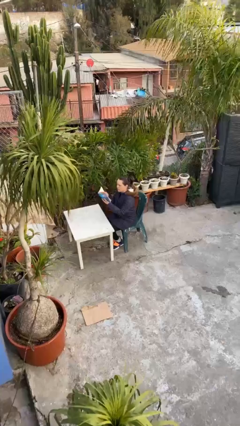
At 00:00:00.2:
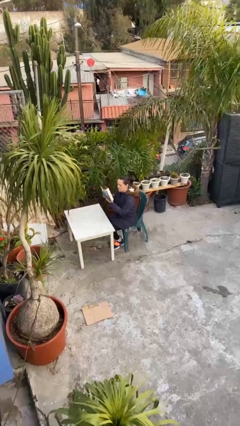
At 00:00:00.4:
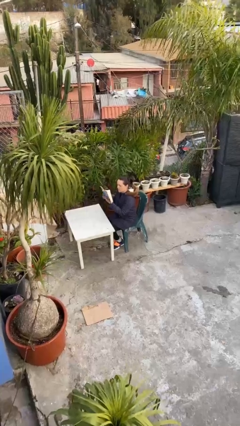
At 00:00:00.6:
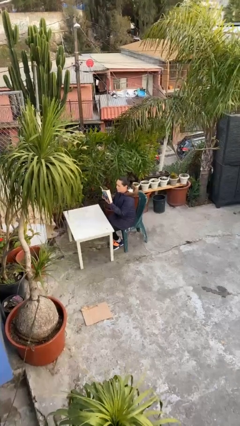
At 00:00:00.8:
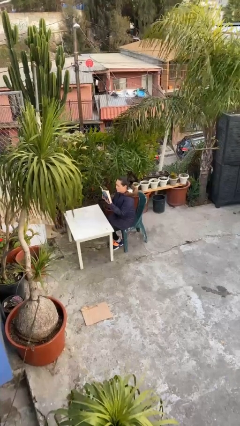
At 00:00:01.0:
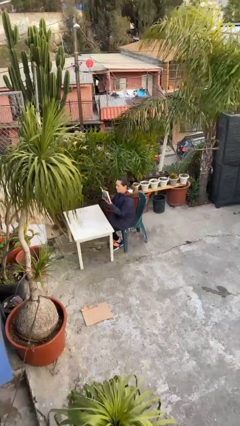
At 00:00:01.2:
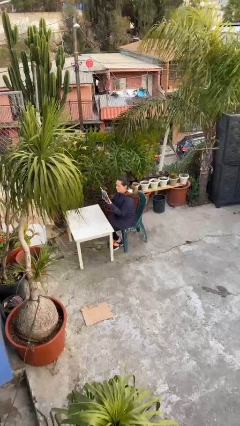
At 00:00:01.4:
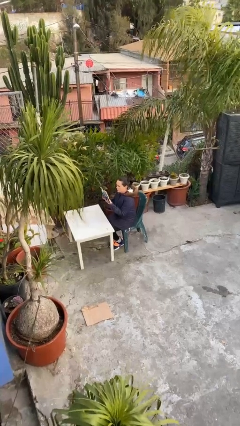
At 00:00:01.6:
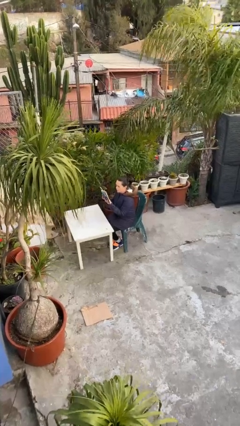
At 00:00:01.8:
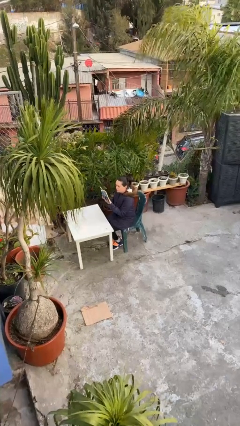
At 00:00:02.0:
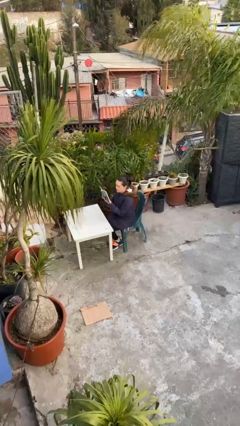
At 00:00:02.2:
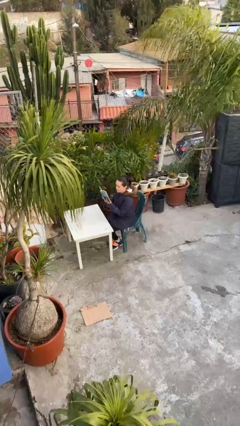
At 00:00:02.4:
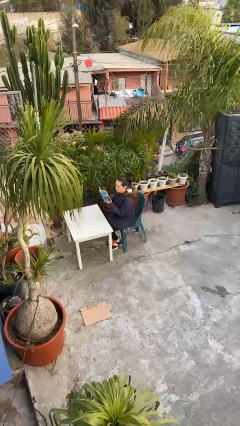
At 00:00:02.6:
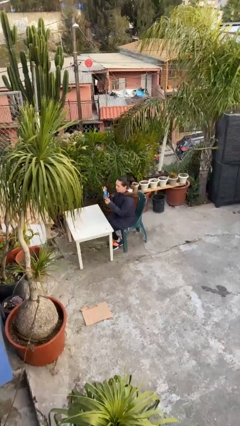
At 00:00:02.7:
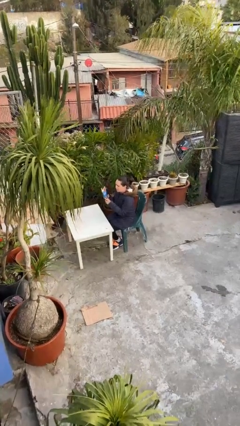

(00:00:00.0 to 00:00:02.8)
person reads document

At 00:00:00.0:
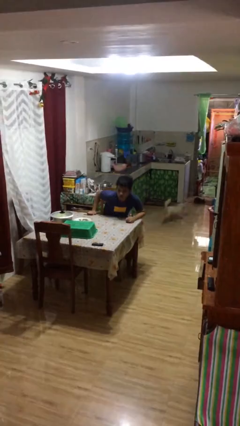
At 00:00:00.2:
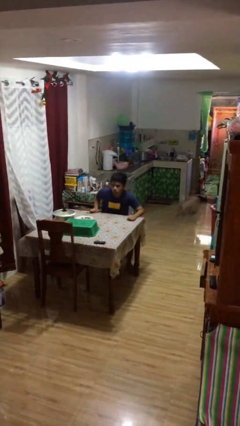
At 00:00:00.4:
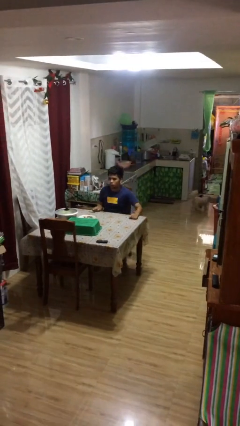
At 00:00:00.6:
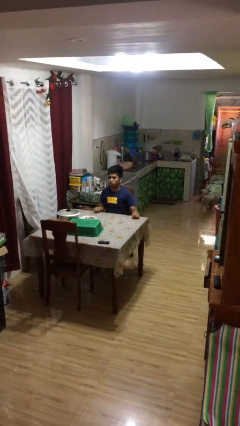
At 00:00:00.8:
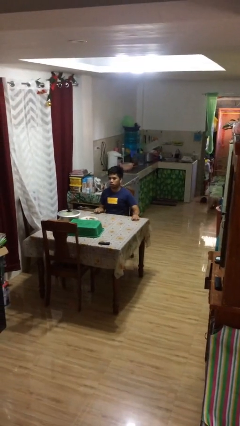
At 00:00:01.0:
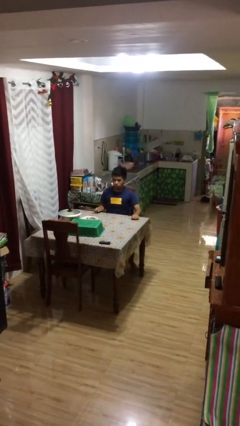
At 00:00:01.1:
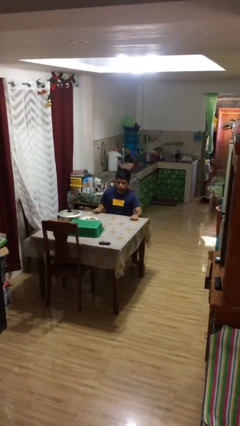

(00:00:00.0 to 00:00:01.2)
person sits down

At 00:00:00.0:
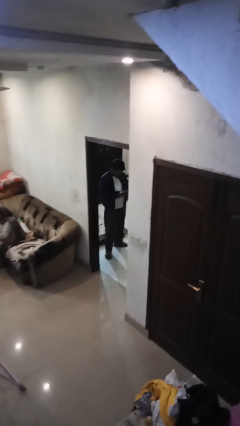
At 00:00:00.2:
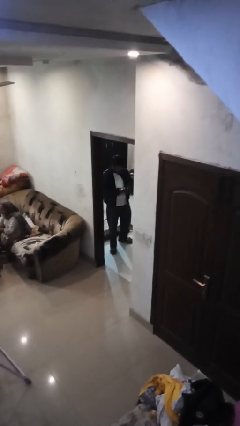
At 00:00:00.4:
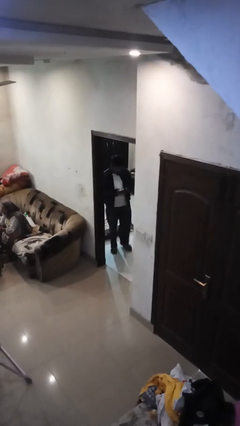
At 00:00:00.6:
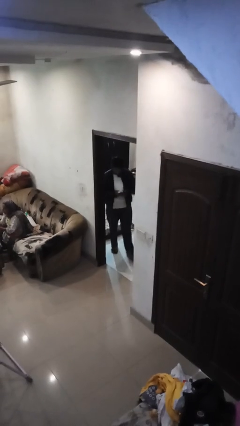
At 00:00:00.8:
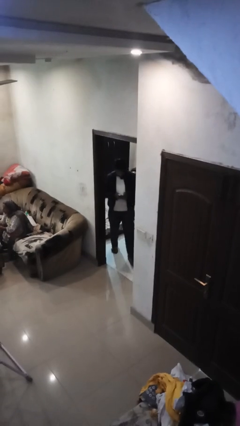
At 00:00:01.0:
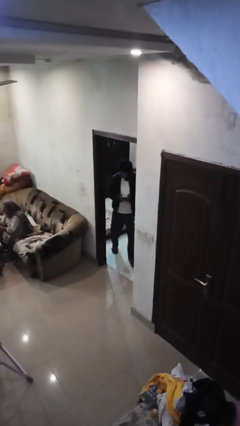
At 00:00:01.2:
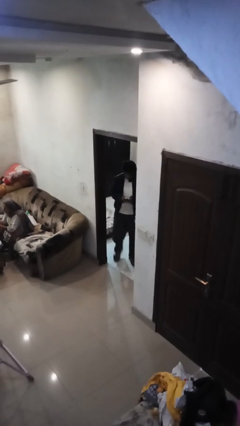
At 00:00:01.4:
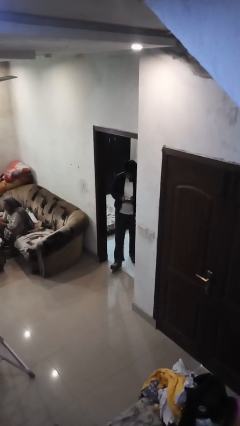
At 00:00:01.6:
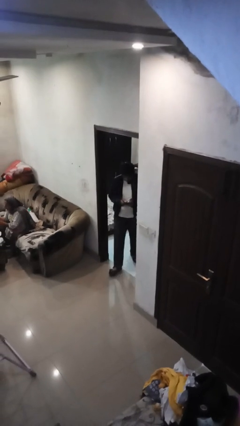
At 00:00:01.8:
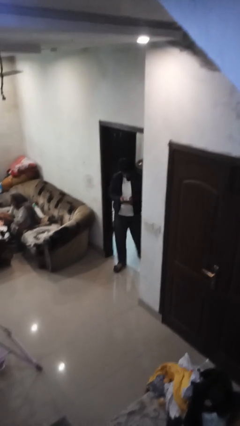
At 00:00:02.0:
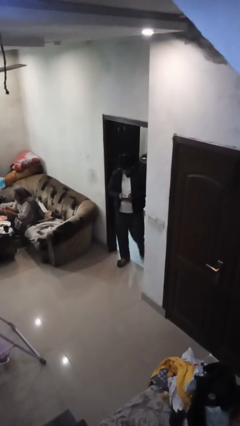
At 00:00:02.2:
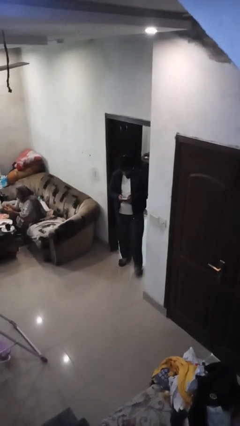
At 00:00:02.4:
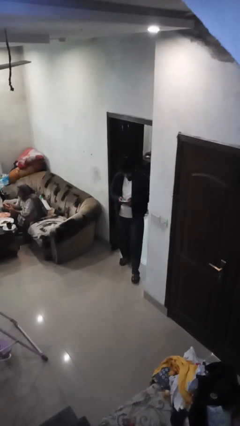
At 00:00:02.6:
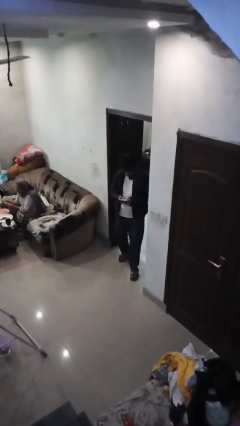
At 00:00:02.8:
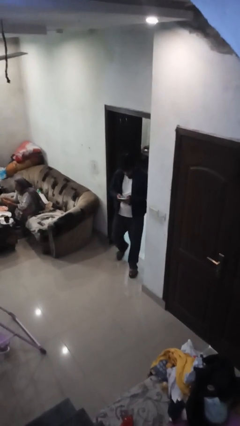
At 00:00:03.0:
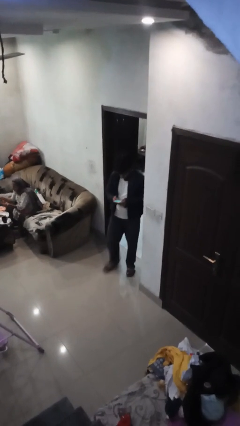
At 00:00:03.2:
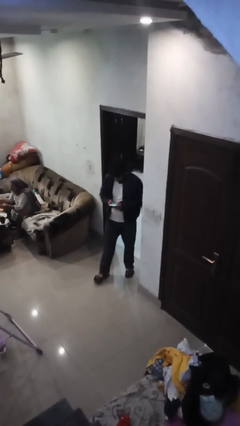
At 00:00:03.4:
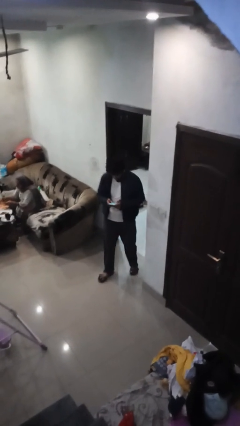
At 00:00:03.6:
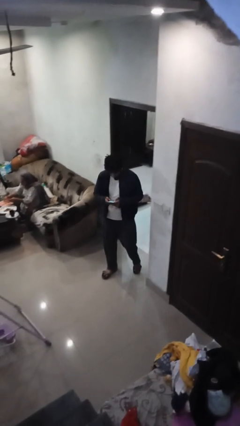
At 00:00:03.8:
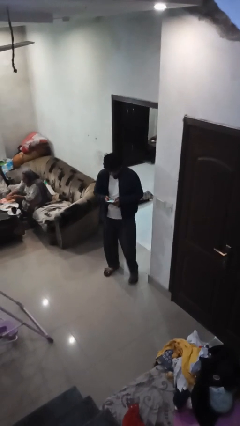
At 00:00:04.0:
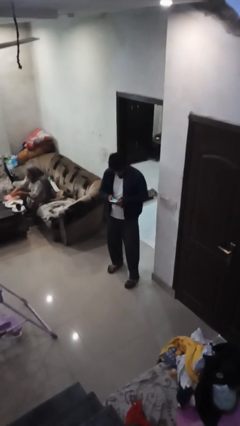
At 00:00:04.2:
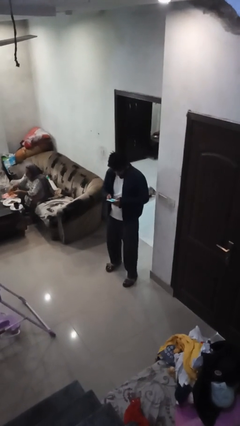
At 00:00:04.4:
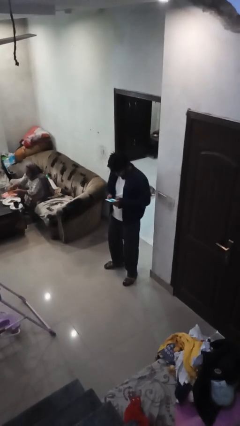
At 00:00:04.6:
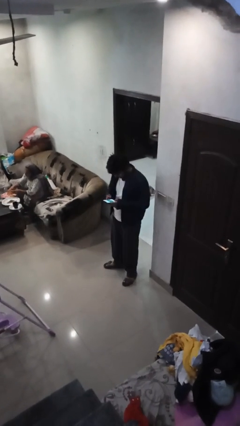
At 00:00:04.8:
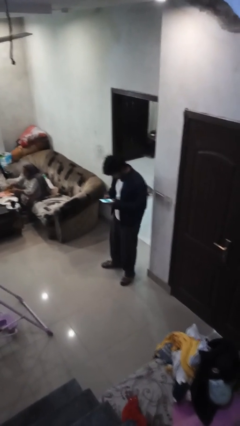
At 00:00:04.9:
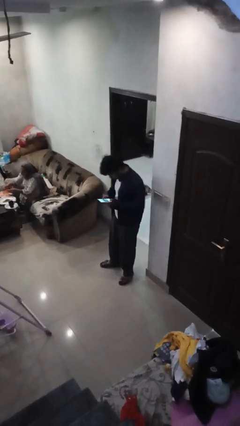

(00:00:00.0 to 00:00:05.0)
person enters scene through structure

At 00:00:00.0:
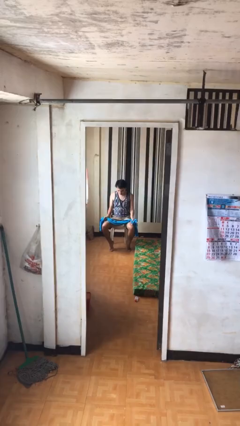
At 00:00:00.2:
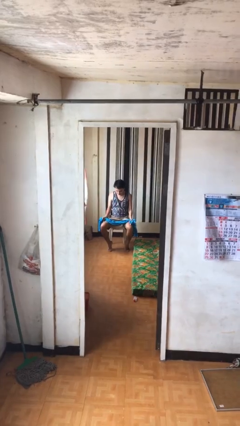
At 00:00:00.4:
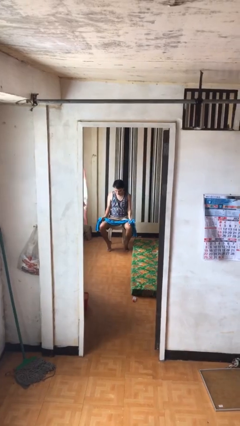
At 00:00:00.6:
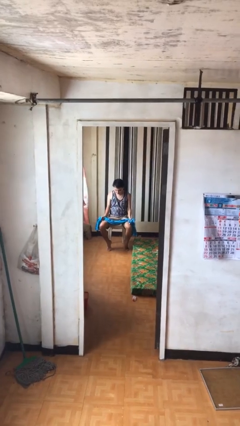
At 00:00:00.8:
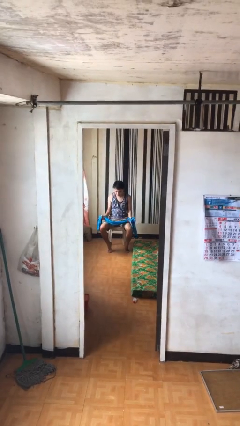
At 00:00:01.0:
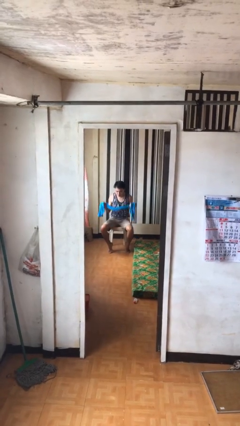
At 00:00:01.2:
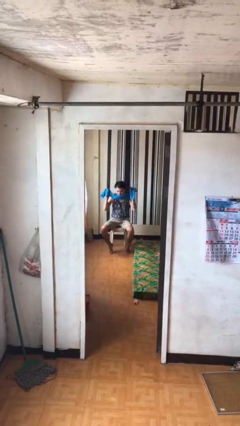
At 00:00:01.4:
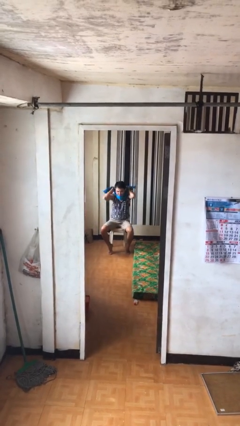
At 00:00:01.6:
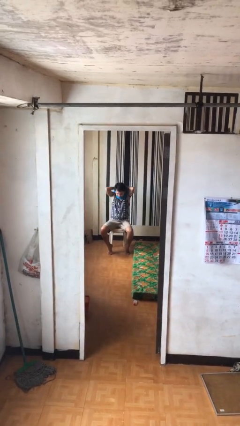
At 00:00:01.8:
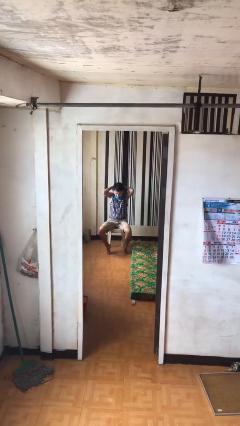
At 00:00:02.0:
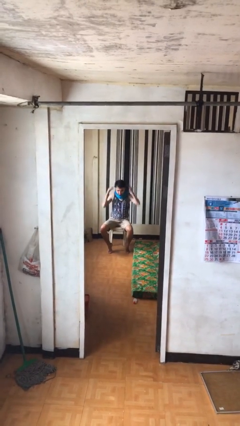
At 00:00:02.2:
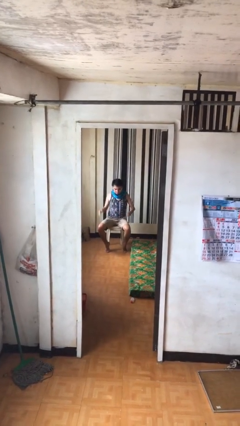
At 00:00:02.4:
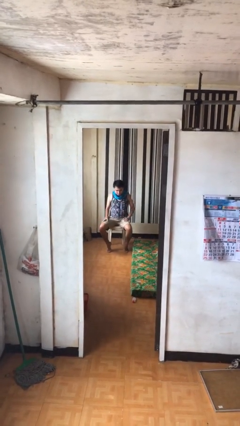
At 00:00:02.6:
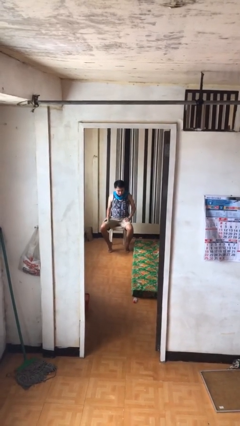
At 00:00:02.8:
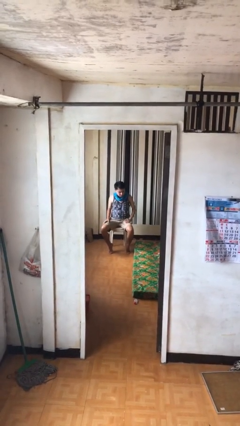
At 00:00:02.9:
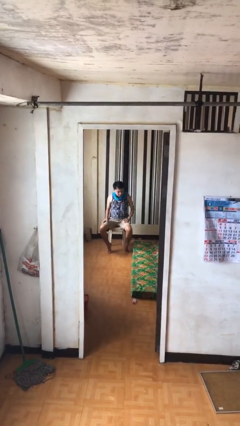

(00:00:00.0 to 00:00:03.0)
person puts on scarf

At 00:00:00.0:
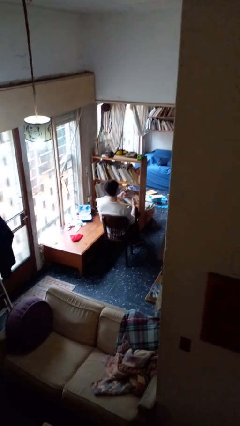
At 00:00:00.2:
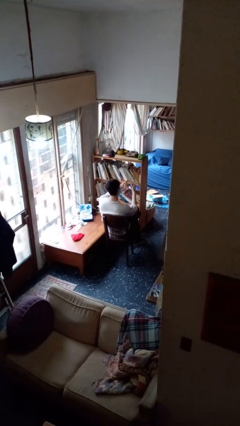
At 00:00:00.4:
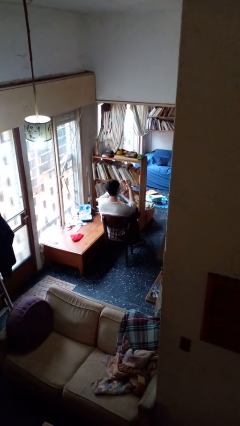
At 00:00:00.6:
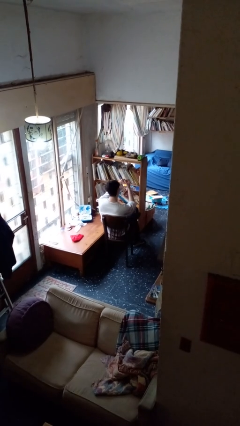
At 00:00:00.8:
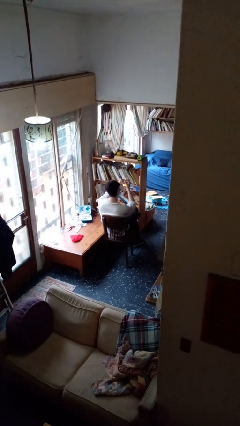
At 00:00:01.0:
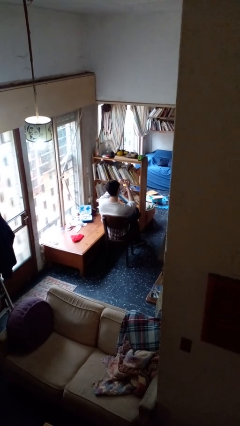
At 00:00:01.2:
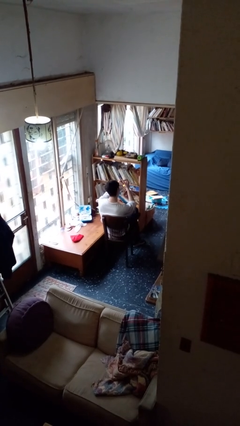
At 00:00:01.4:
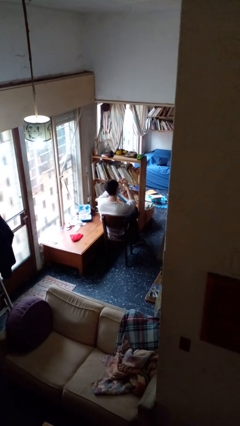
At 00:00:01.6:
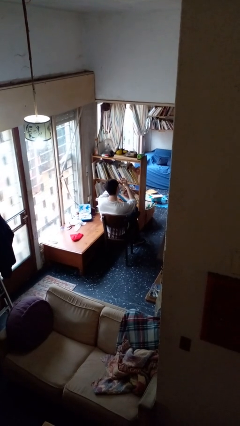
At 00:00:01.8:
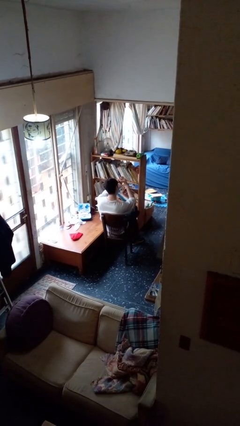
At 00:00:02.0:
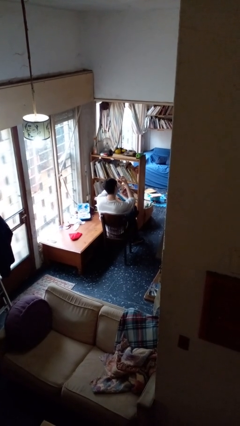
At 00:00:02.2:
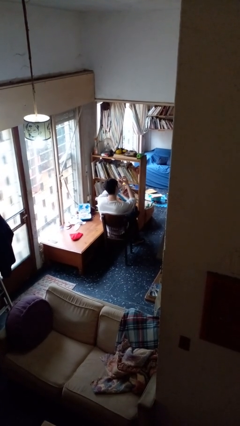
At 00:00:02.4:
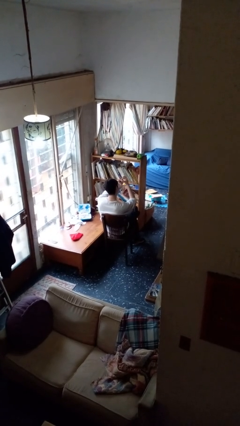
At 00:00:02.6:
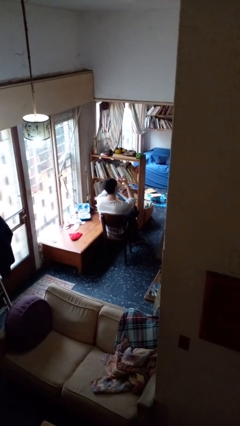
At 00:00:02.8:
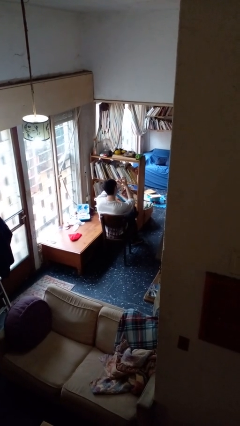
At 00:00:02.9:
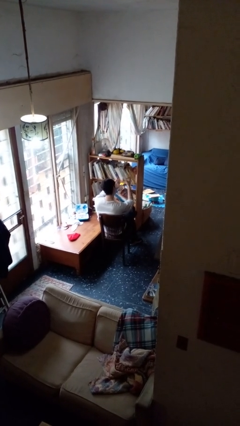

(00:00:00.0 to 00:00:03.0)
person files fingernails

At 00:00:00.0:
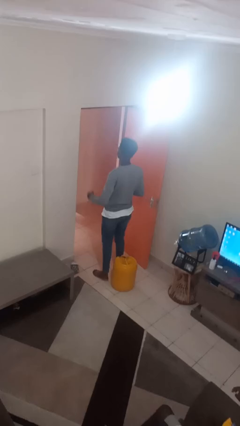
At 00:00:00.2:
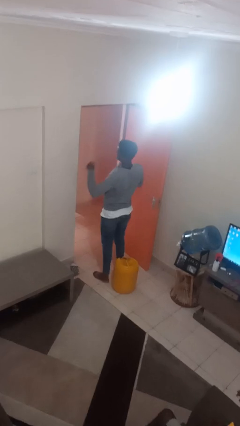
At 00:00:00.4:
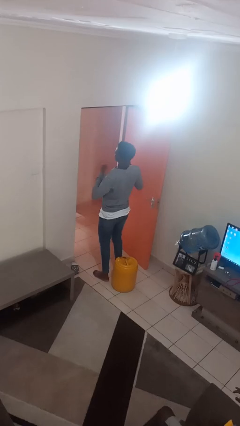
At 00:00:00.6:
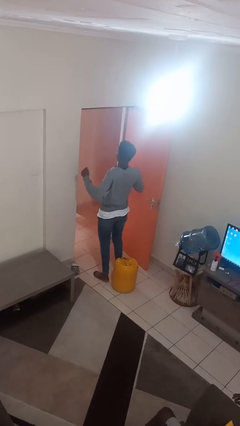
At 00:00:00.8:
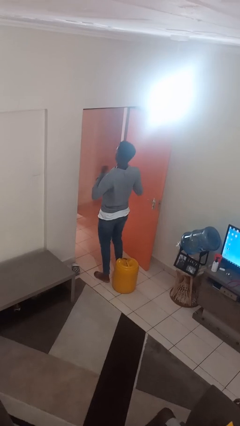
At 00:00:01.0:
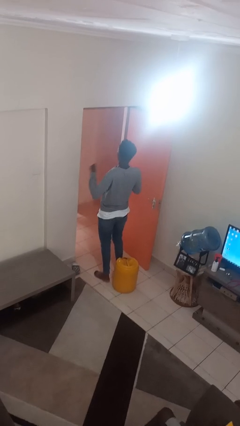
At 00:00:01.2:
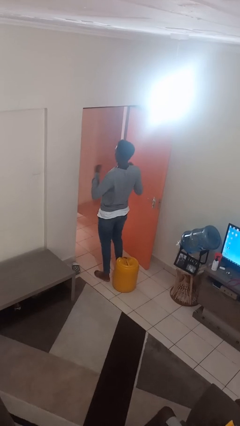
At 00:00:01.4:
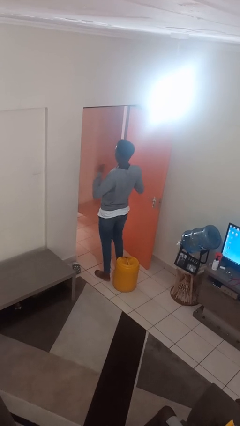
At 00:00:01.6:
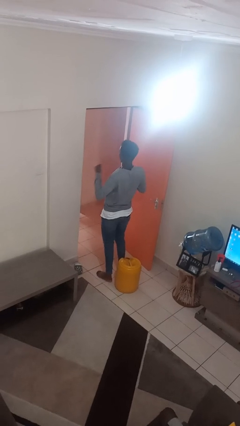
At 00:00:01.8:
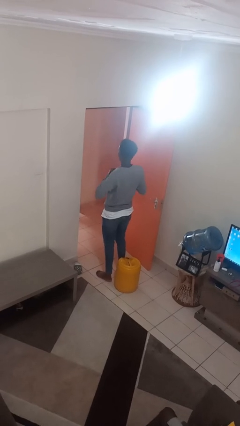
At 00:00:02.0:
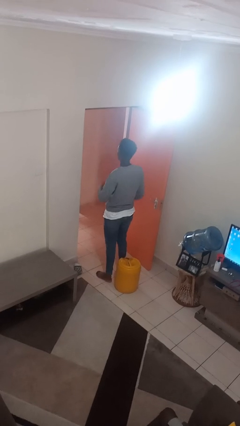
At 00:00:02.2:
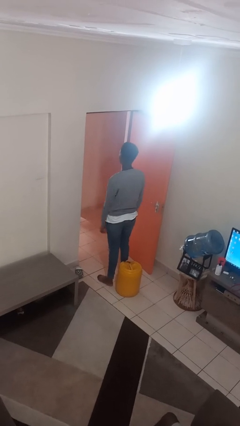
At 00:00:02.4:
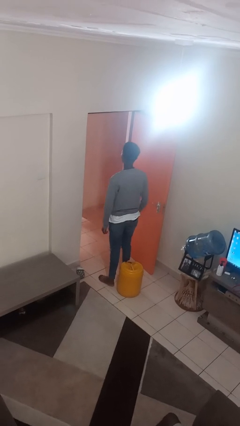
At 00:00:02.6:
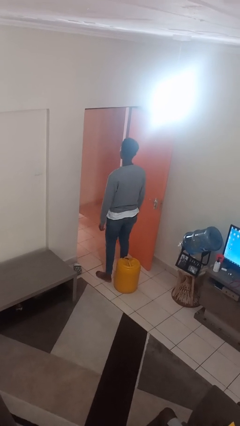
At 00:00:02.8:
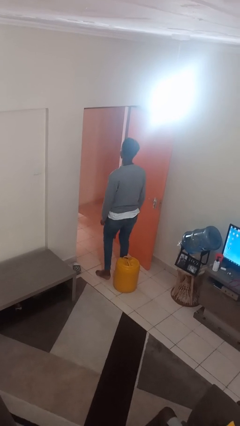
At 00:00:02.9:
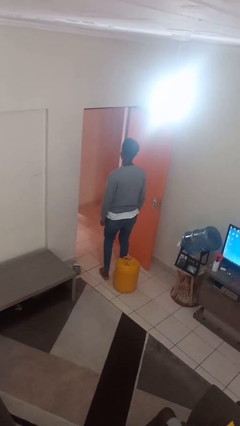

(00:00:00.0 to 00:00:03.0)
person drums on chest
